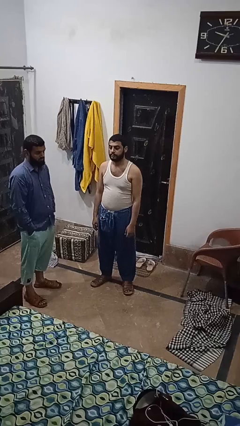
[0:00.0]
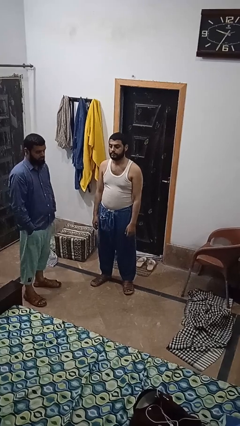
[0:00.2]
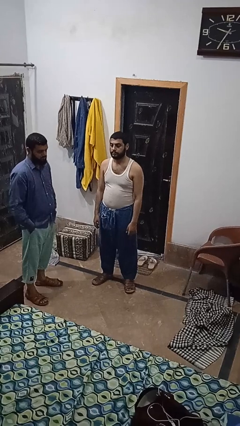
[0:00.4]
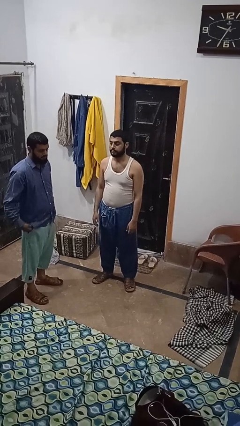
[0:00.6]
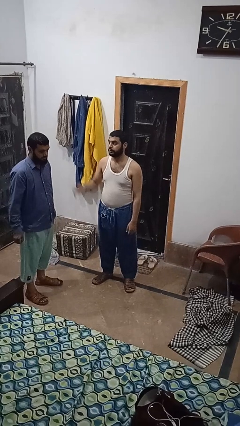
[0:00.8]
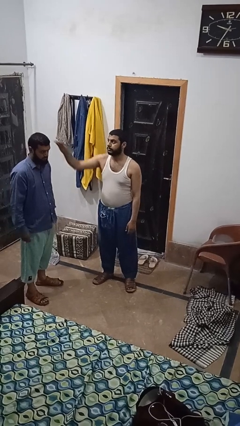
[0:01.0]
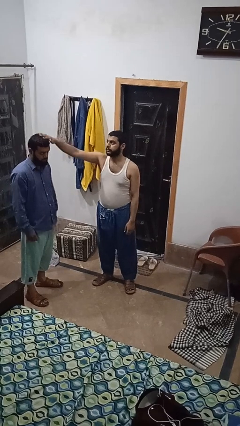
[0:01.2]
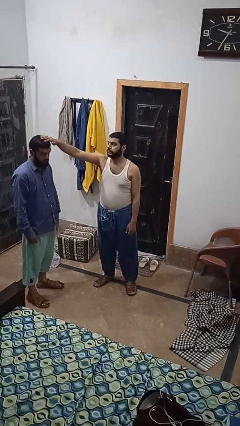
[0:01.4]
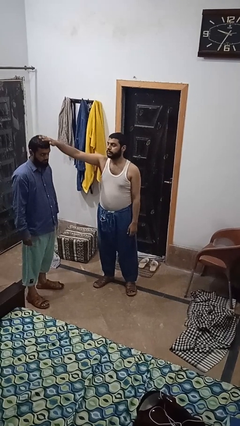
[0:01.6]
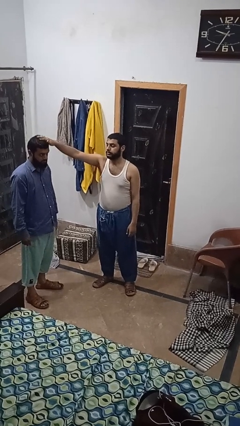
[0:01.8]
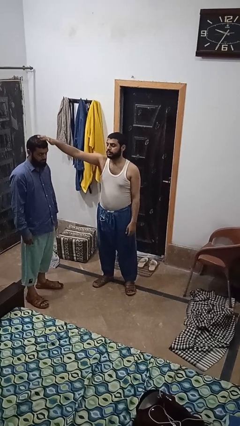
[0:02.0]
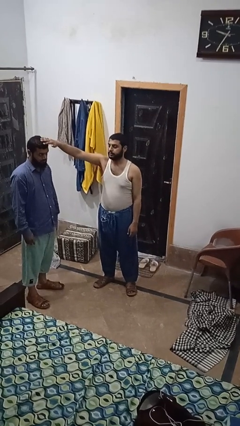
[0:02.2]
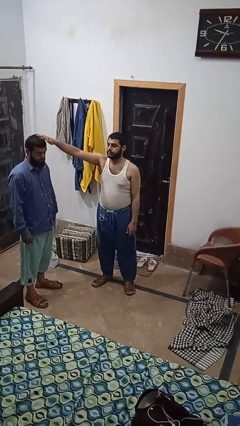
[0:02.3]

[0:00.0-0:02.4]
person grabs person by hair

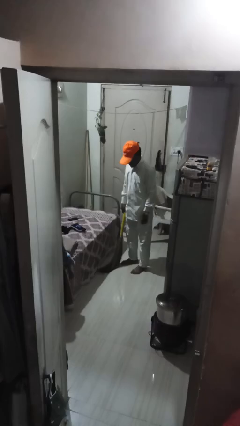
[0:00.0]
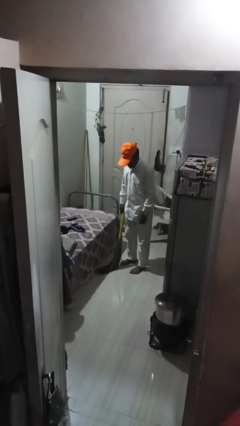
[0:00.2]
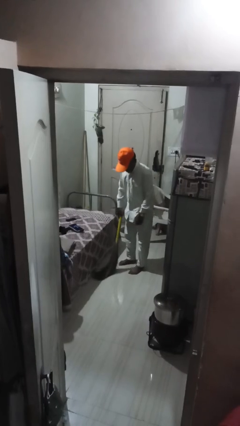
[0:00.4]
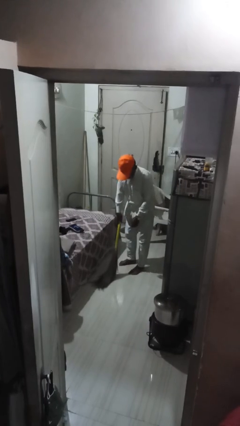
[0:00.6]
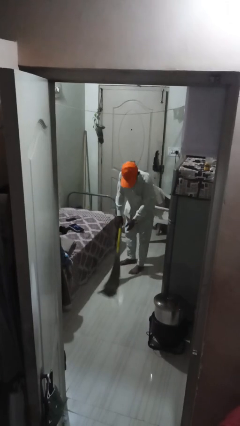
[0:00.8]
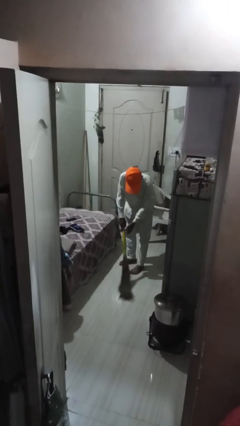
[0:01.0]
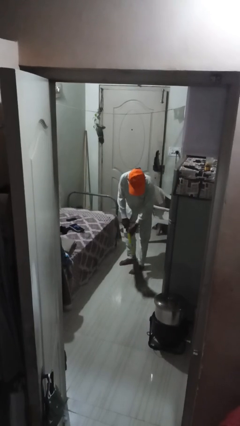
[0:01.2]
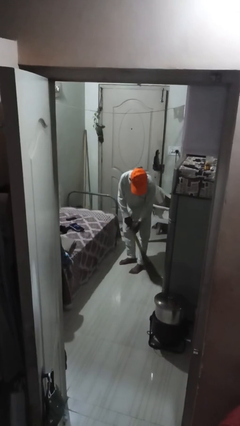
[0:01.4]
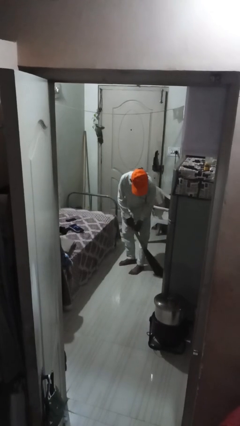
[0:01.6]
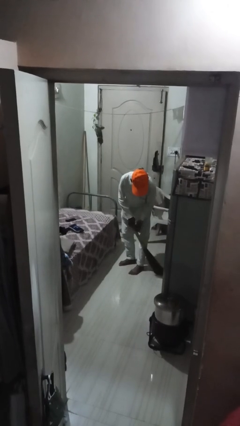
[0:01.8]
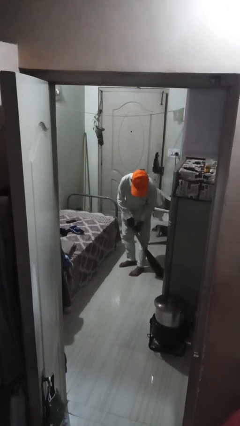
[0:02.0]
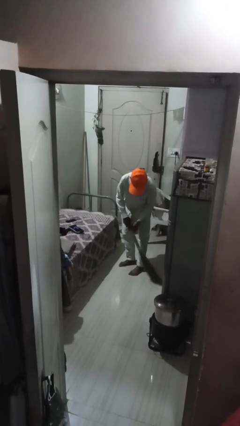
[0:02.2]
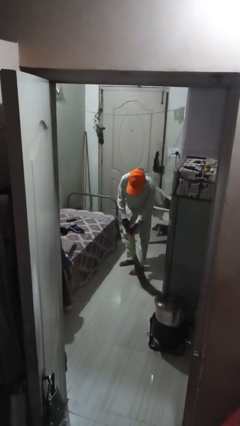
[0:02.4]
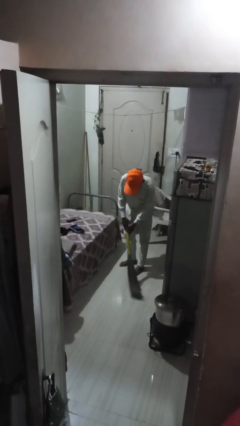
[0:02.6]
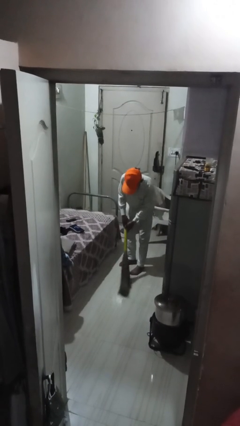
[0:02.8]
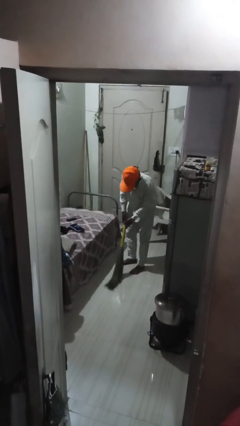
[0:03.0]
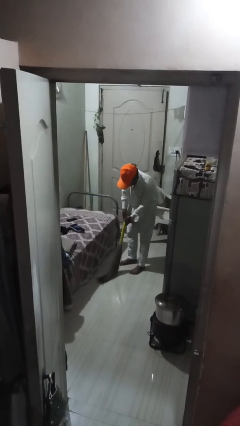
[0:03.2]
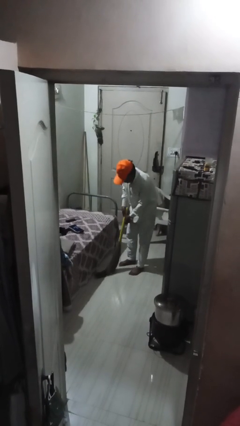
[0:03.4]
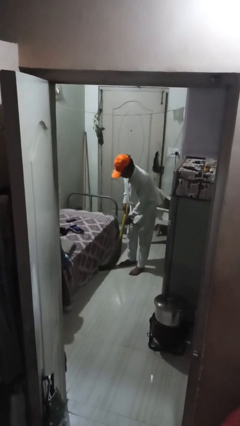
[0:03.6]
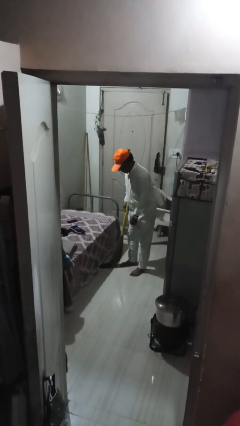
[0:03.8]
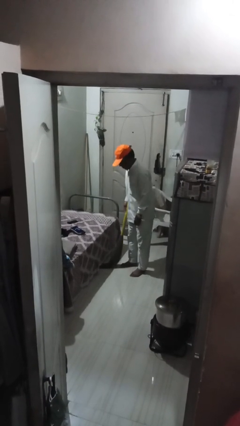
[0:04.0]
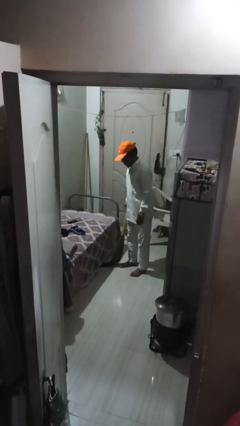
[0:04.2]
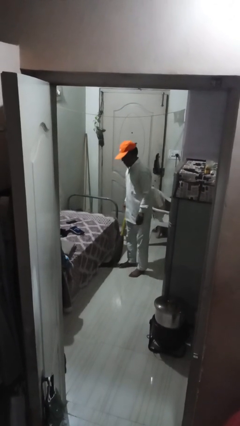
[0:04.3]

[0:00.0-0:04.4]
person sweeps floor

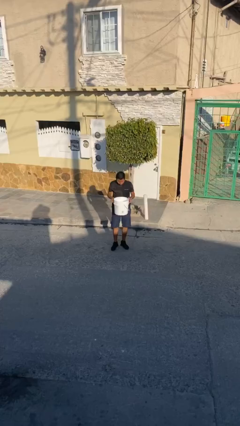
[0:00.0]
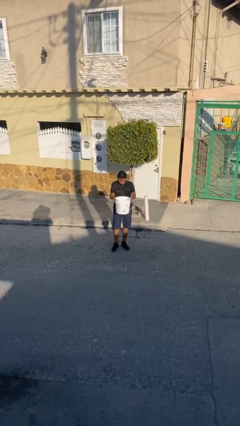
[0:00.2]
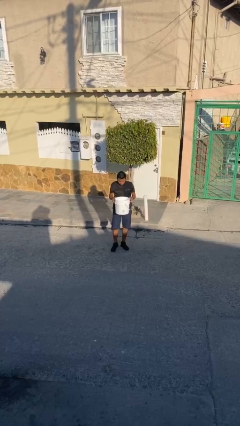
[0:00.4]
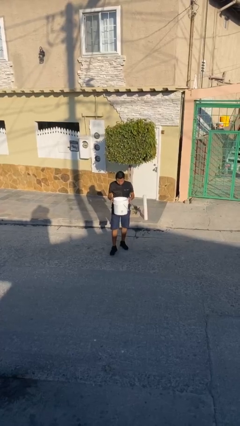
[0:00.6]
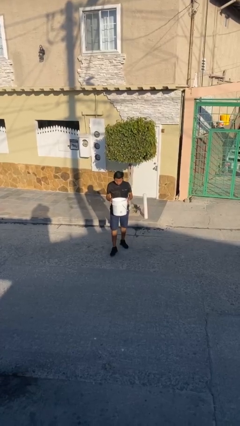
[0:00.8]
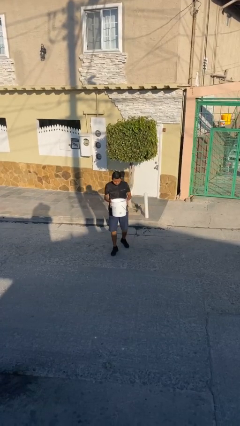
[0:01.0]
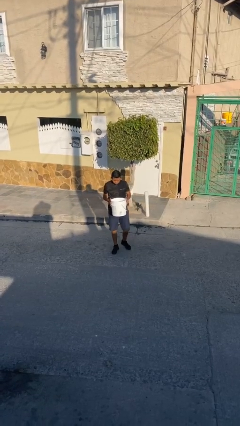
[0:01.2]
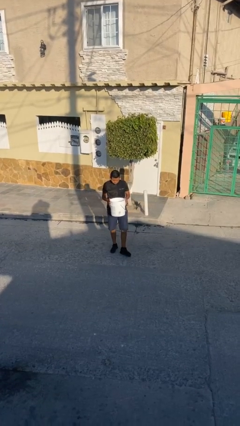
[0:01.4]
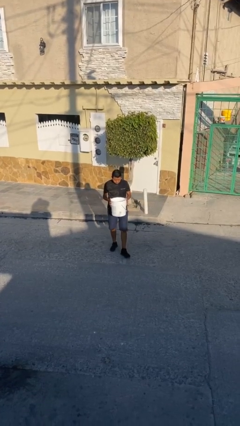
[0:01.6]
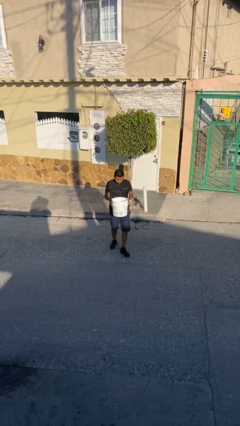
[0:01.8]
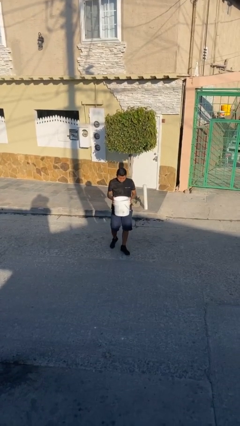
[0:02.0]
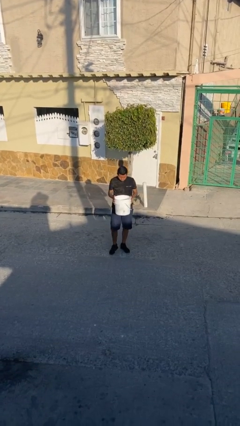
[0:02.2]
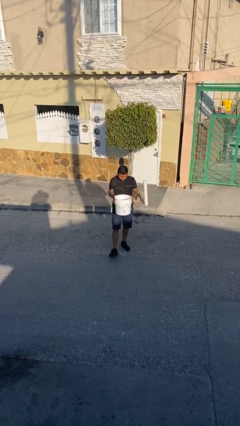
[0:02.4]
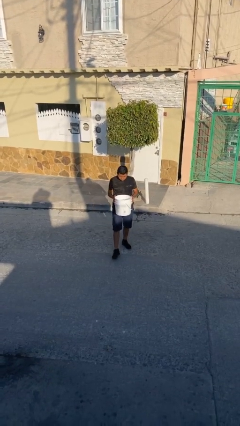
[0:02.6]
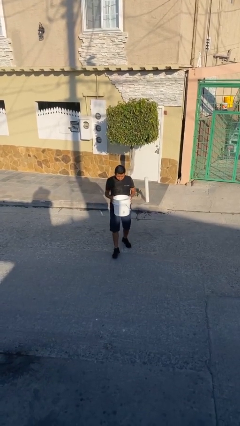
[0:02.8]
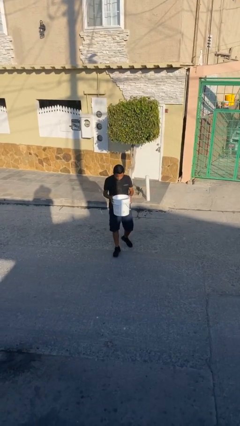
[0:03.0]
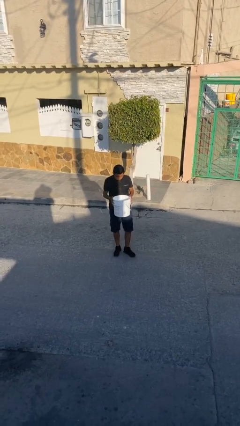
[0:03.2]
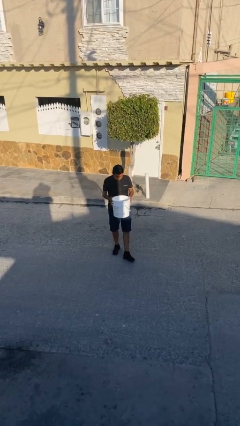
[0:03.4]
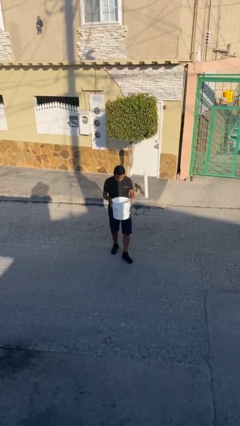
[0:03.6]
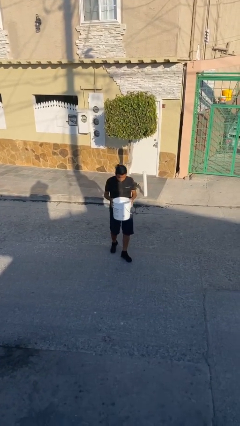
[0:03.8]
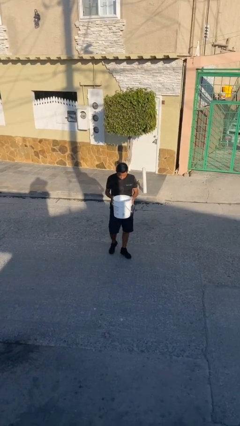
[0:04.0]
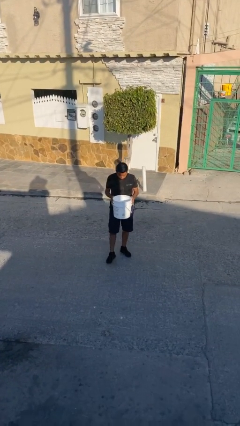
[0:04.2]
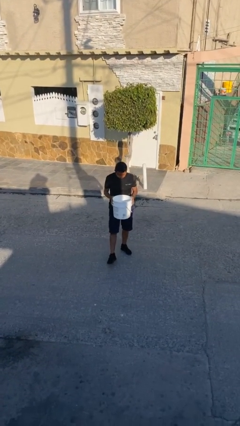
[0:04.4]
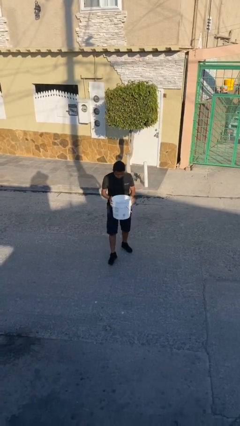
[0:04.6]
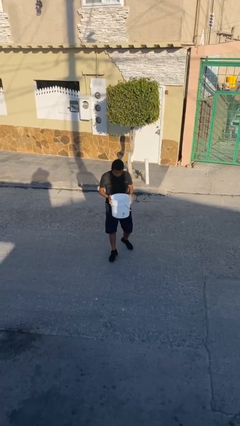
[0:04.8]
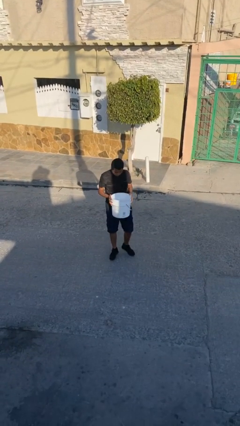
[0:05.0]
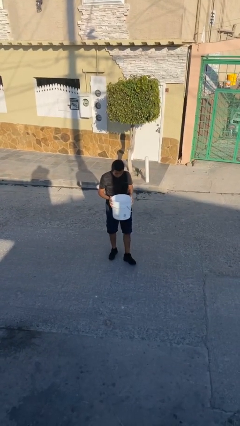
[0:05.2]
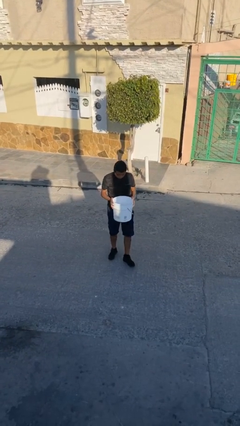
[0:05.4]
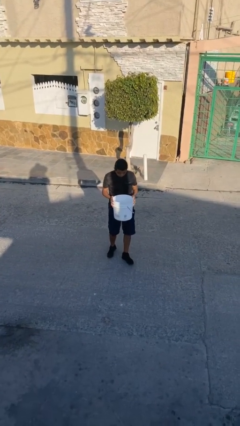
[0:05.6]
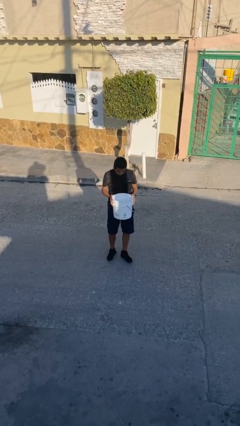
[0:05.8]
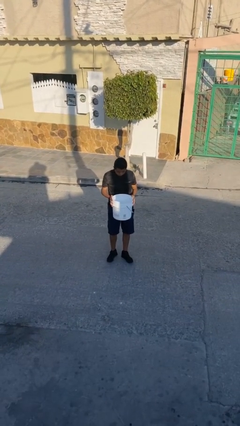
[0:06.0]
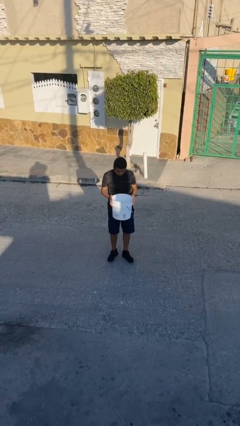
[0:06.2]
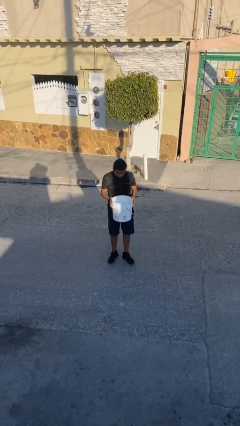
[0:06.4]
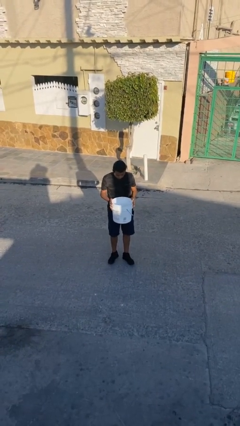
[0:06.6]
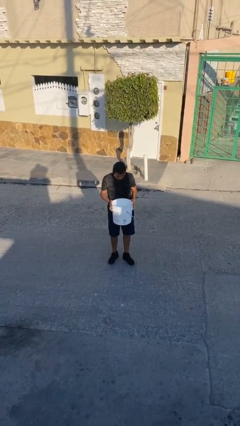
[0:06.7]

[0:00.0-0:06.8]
person carries heavy object

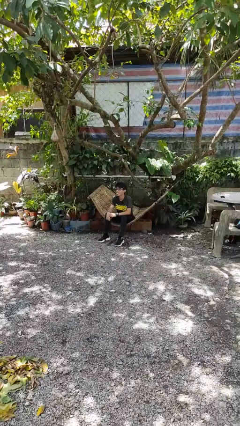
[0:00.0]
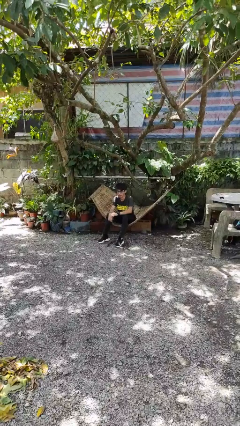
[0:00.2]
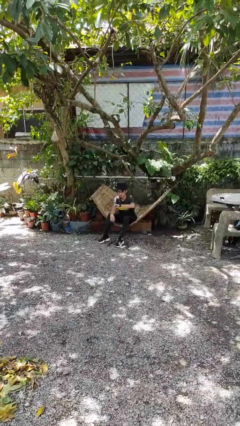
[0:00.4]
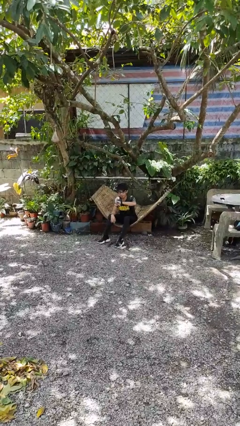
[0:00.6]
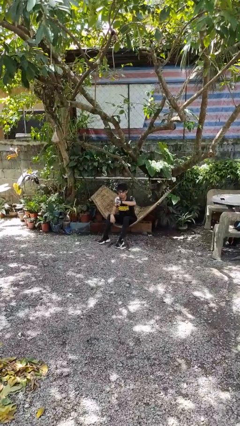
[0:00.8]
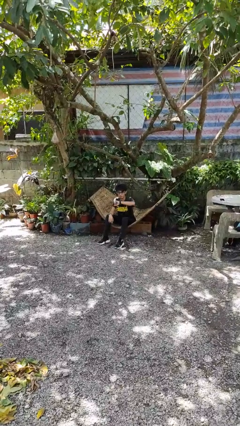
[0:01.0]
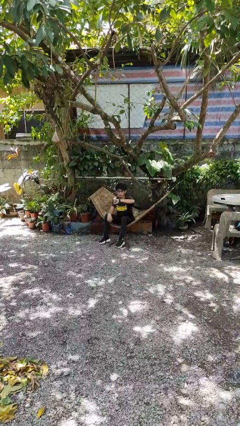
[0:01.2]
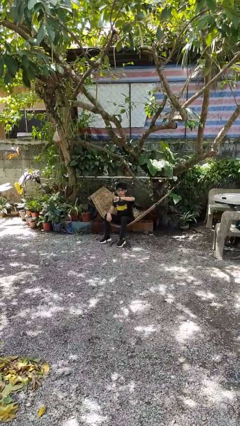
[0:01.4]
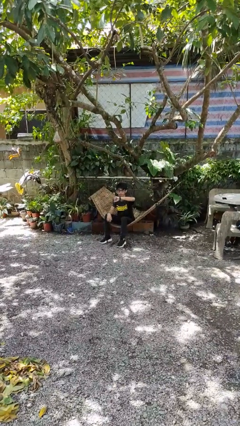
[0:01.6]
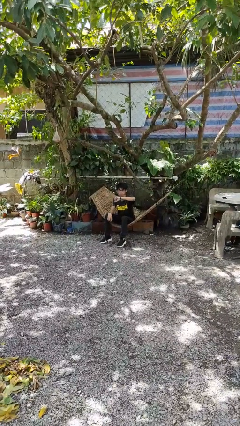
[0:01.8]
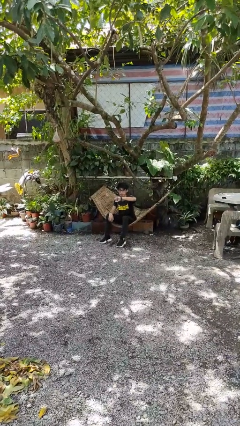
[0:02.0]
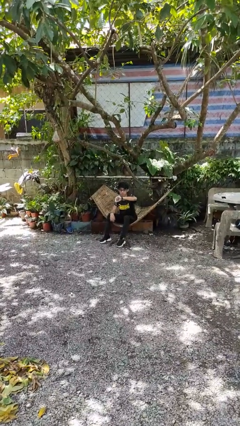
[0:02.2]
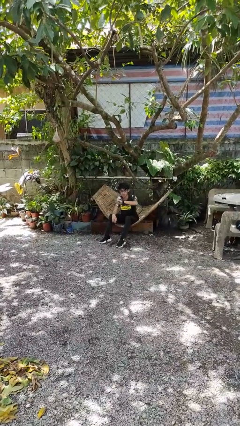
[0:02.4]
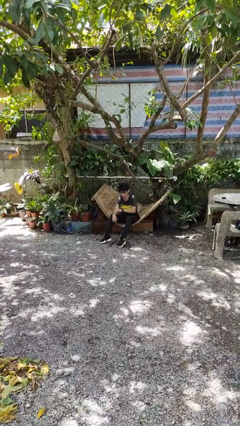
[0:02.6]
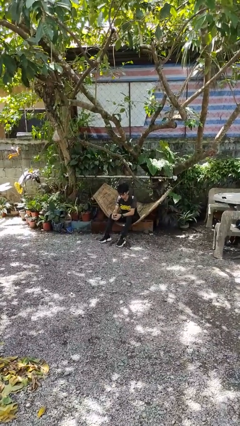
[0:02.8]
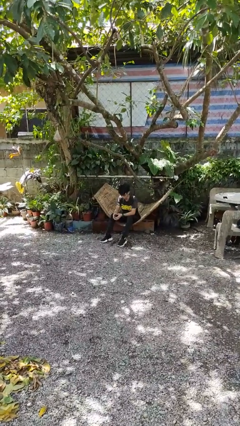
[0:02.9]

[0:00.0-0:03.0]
person looks at wristwatch

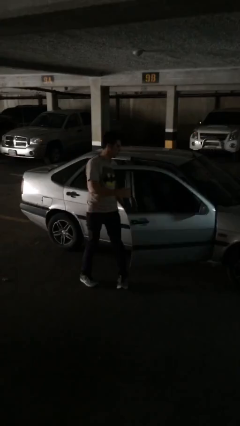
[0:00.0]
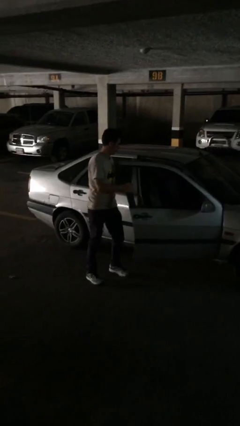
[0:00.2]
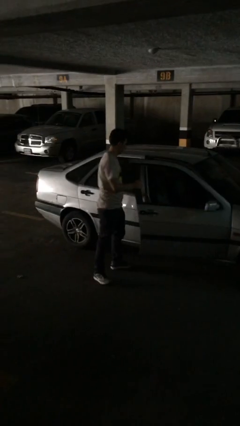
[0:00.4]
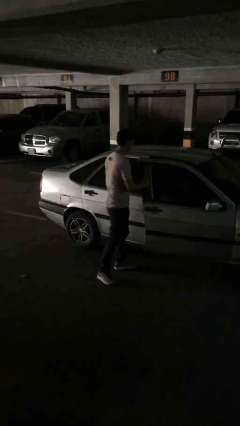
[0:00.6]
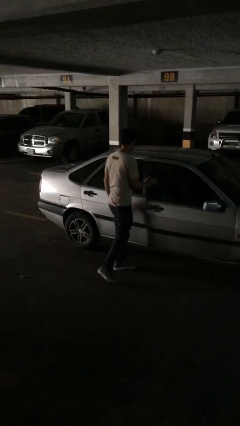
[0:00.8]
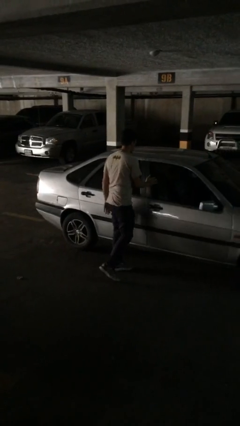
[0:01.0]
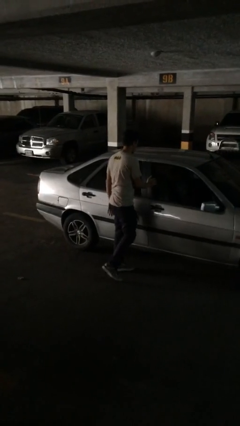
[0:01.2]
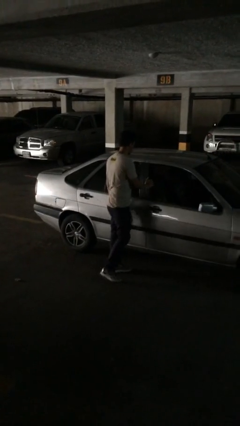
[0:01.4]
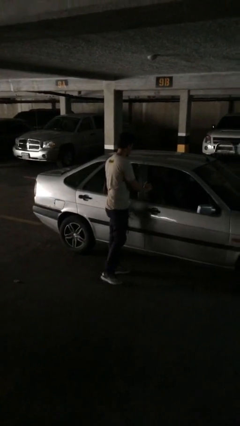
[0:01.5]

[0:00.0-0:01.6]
person closes car door
